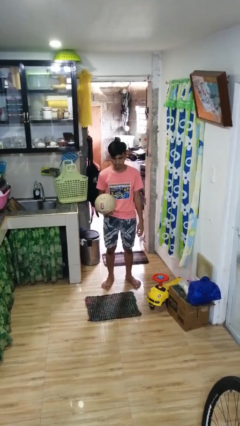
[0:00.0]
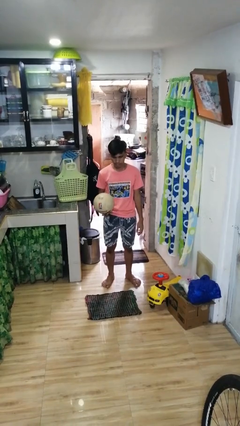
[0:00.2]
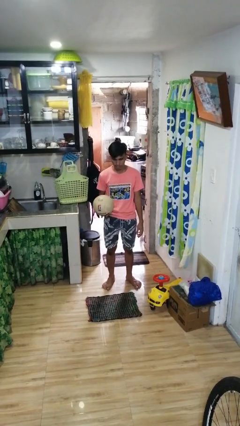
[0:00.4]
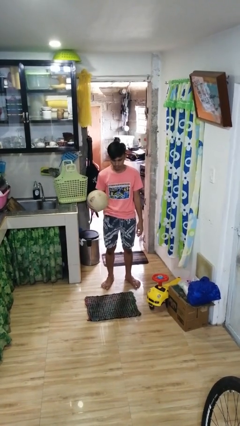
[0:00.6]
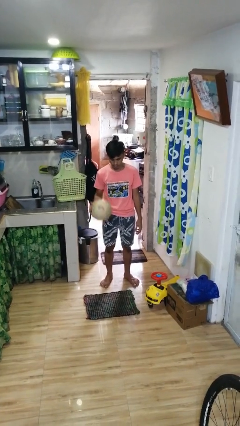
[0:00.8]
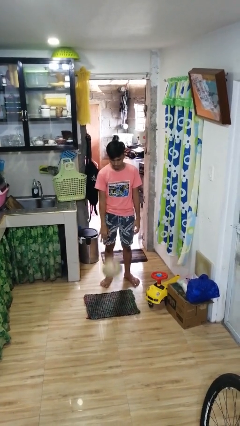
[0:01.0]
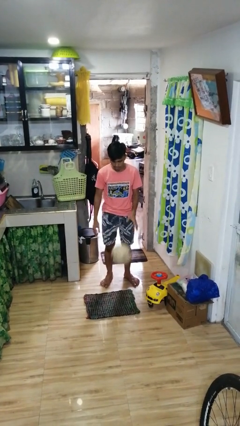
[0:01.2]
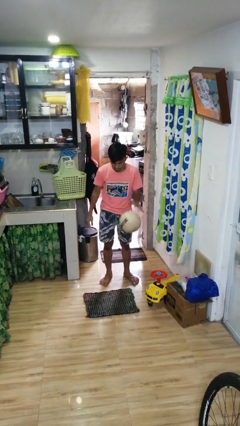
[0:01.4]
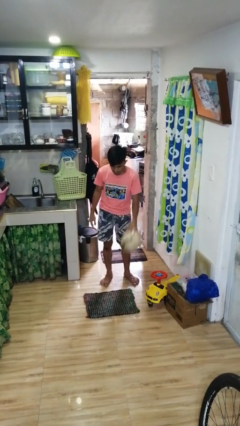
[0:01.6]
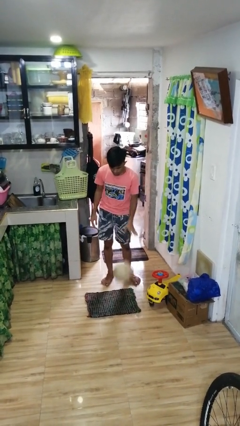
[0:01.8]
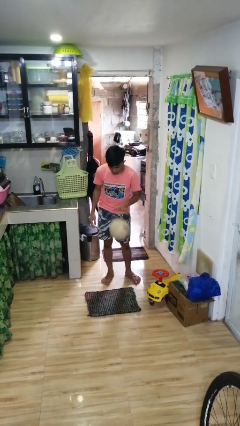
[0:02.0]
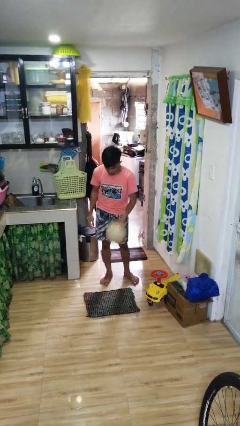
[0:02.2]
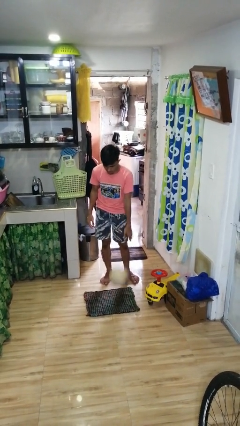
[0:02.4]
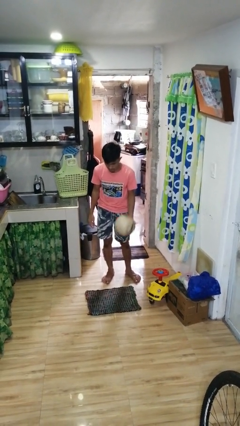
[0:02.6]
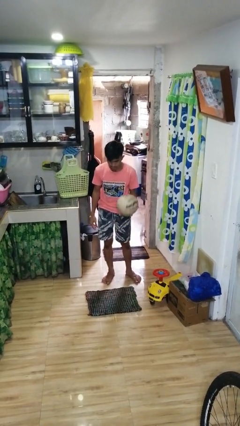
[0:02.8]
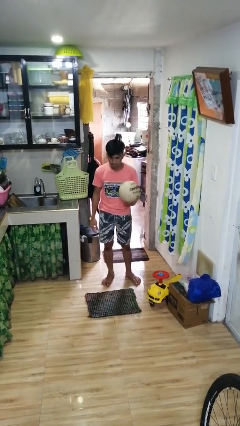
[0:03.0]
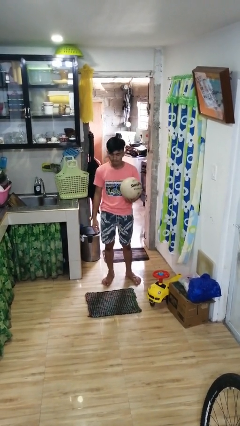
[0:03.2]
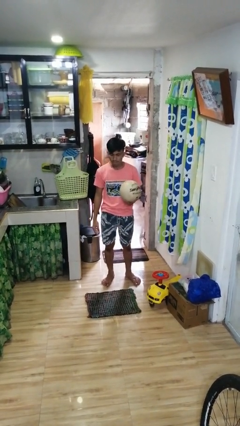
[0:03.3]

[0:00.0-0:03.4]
person bounces ball on floor

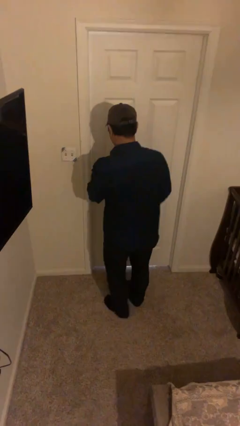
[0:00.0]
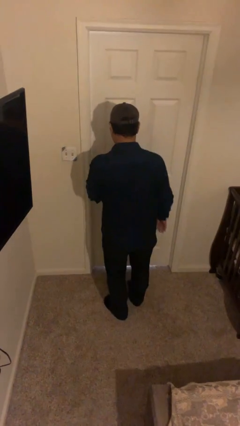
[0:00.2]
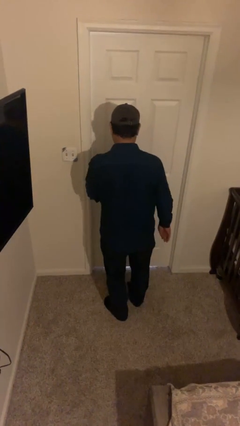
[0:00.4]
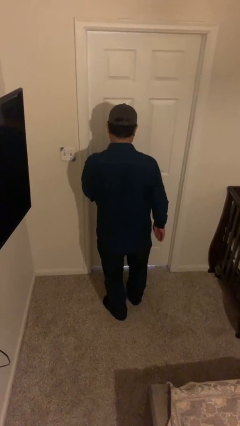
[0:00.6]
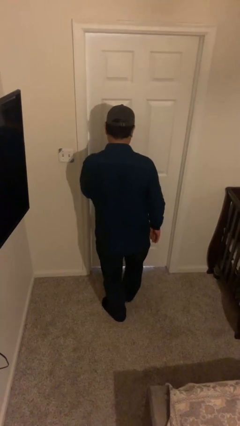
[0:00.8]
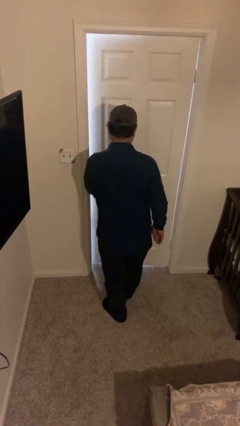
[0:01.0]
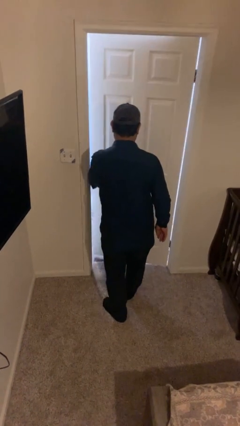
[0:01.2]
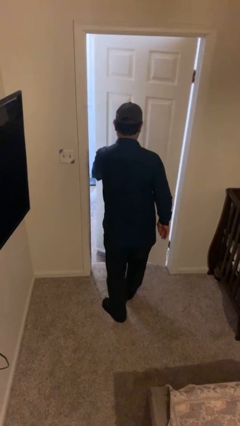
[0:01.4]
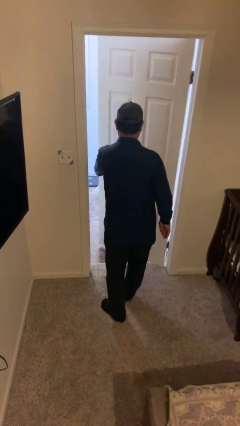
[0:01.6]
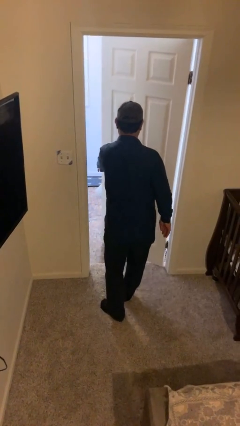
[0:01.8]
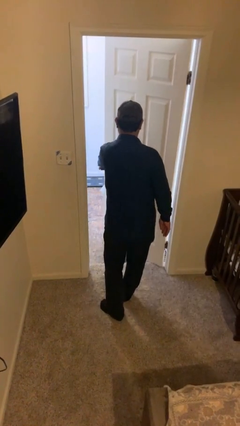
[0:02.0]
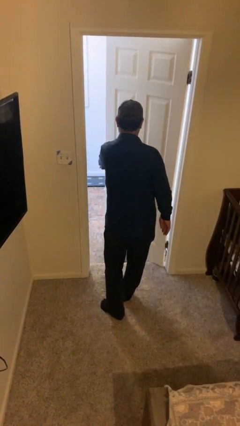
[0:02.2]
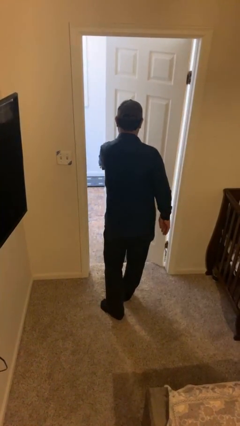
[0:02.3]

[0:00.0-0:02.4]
person opens facility door

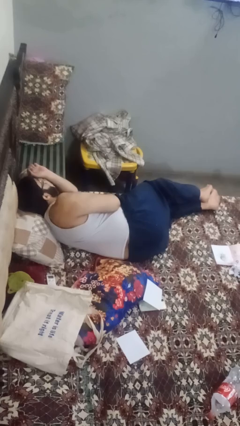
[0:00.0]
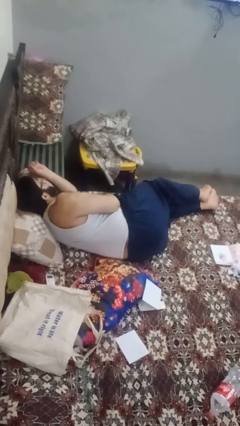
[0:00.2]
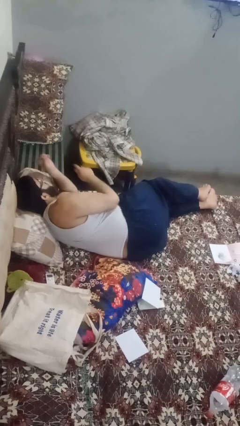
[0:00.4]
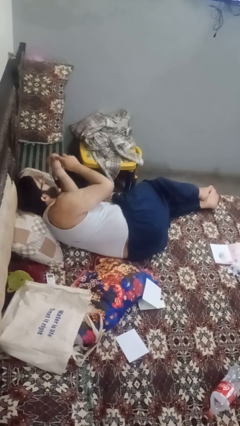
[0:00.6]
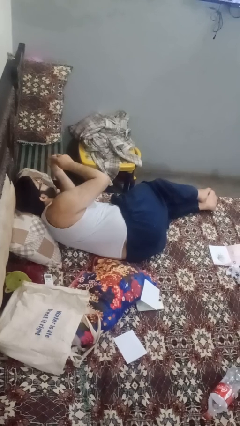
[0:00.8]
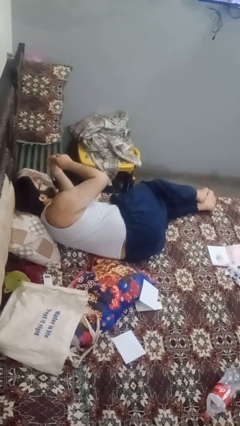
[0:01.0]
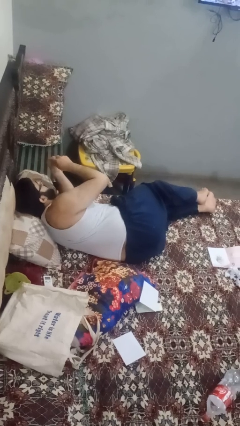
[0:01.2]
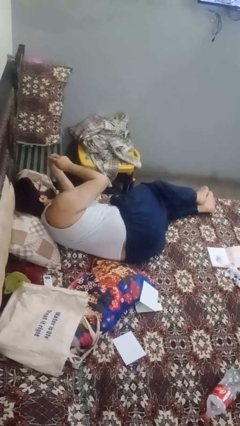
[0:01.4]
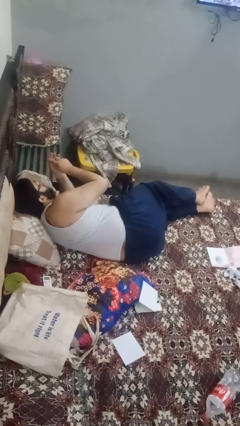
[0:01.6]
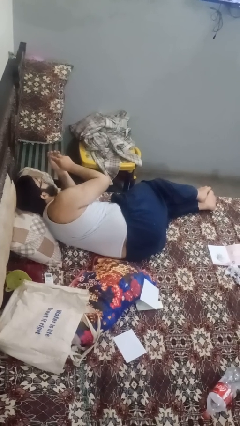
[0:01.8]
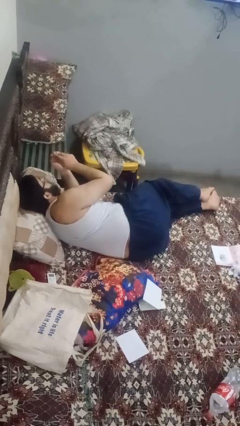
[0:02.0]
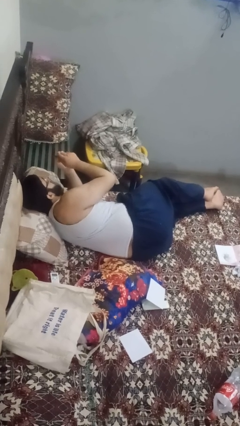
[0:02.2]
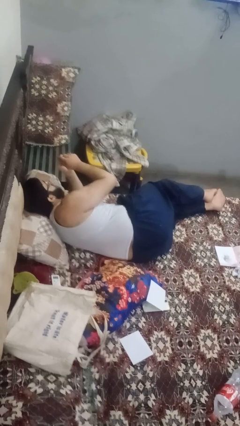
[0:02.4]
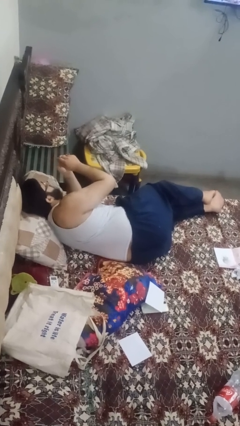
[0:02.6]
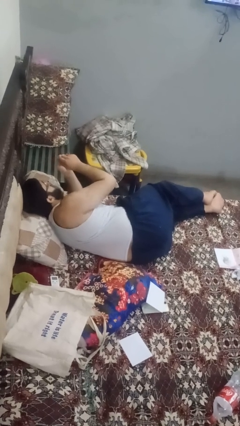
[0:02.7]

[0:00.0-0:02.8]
person files fingernails

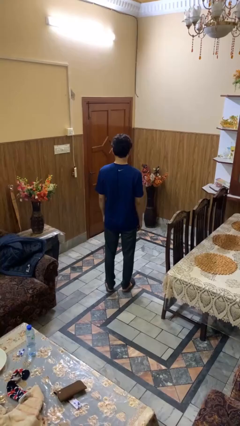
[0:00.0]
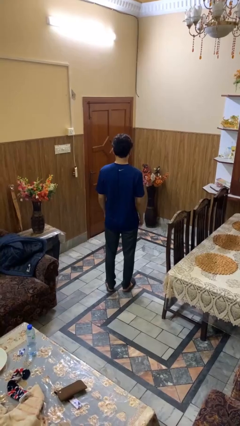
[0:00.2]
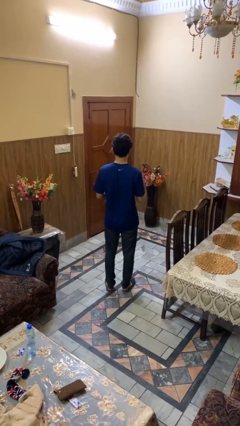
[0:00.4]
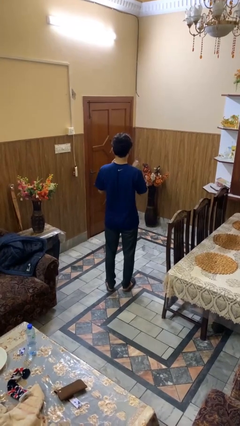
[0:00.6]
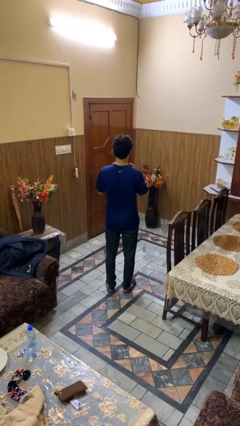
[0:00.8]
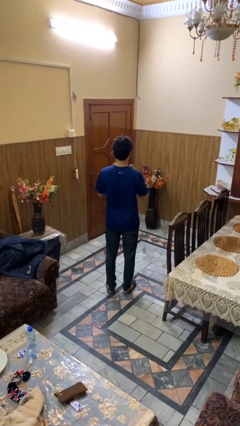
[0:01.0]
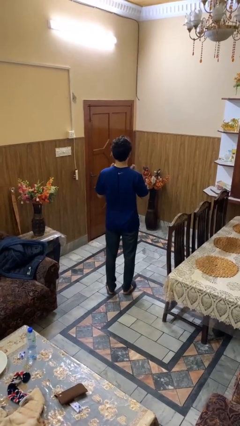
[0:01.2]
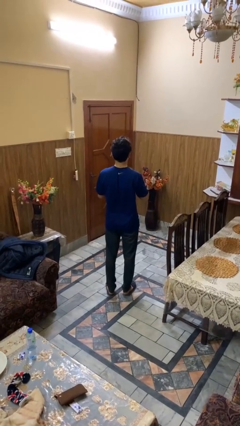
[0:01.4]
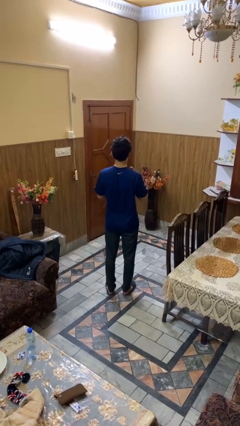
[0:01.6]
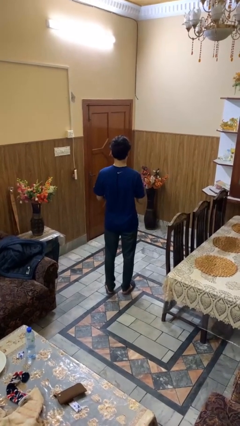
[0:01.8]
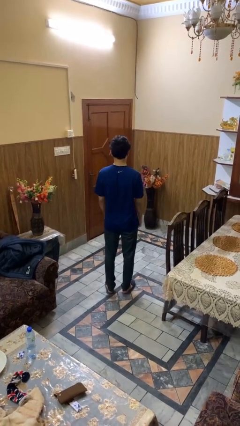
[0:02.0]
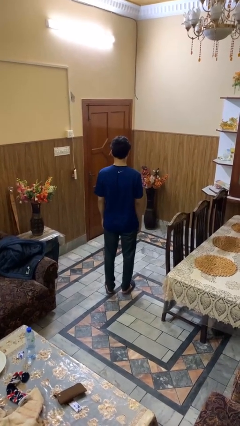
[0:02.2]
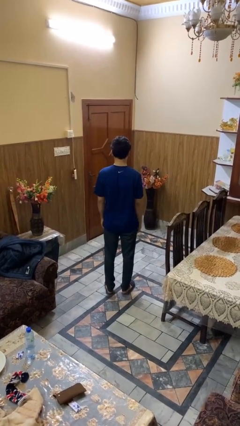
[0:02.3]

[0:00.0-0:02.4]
person drums on chest

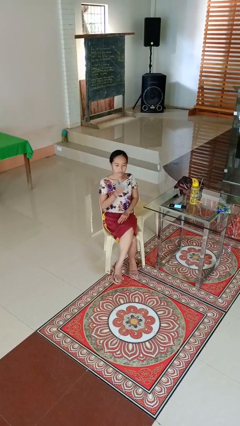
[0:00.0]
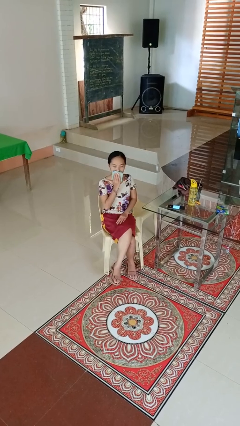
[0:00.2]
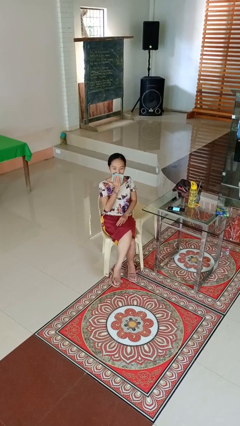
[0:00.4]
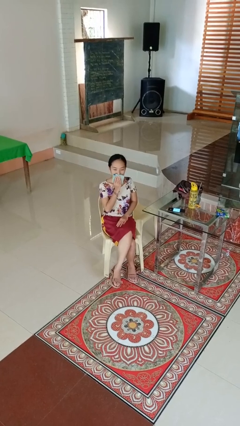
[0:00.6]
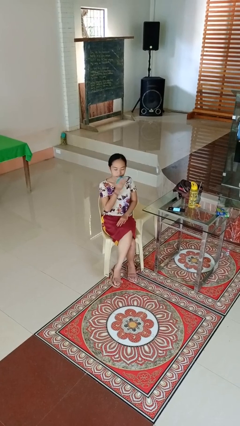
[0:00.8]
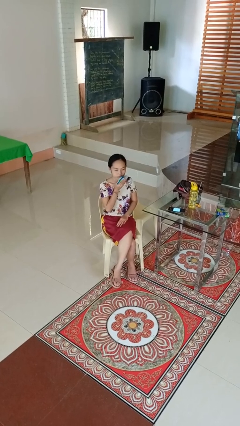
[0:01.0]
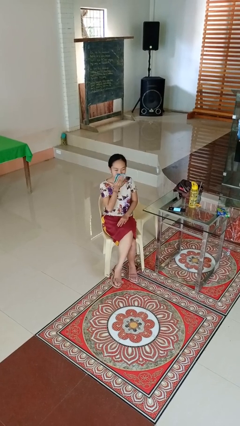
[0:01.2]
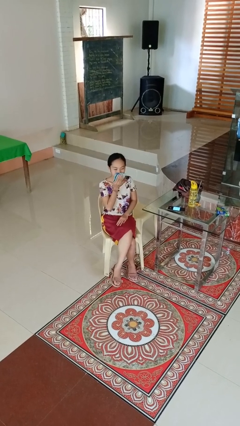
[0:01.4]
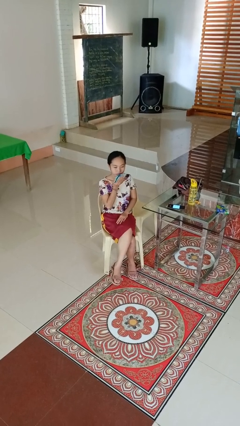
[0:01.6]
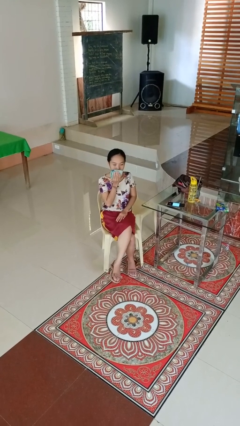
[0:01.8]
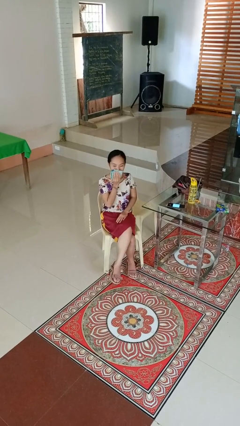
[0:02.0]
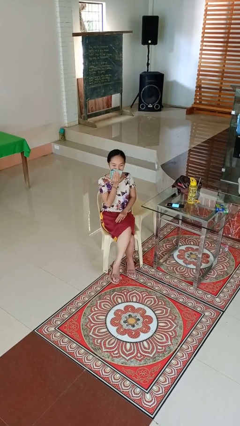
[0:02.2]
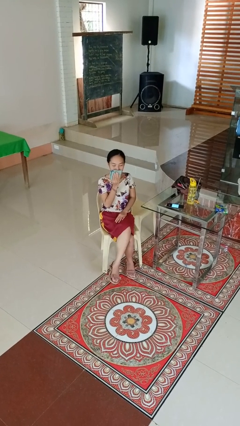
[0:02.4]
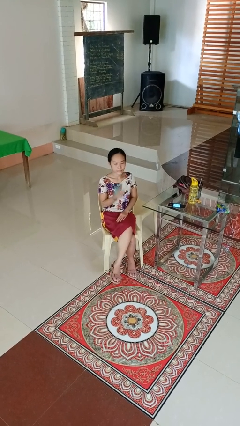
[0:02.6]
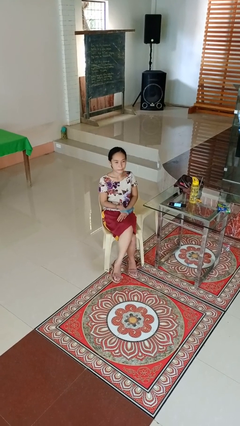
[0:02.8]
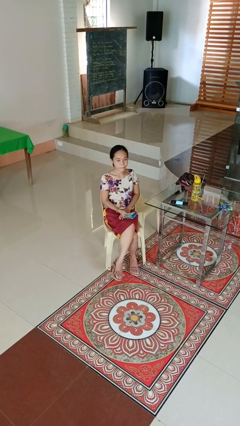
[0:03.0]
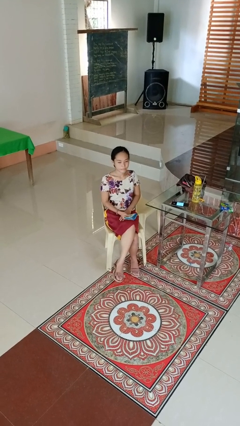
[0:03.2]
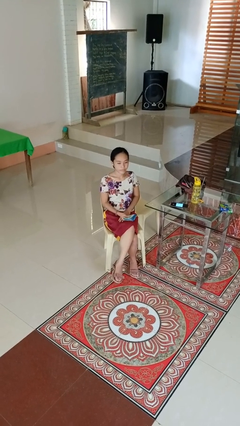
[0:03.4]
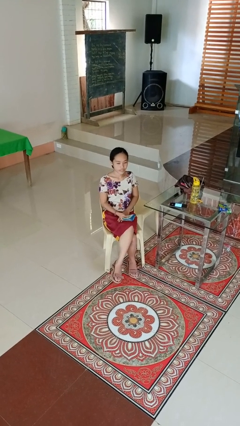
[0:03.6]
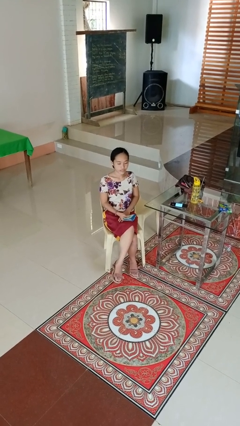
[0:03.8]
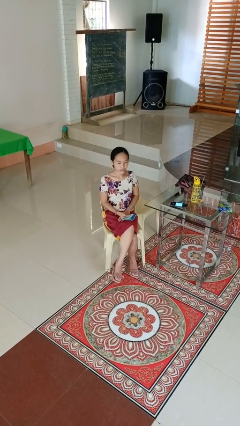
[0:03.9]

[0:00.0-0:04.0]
person wipes mouth with napkin

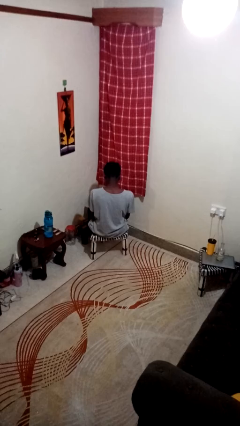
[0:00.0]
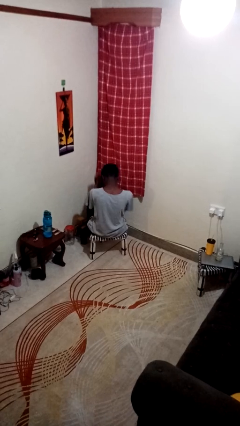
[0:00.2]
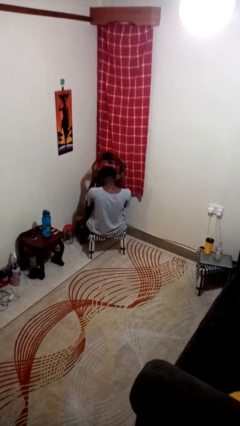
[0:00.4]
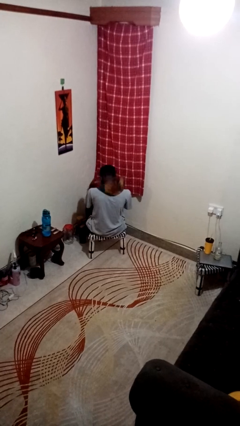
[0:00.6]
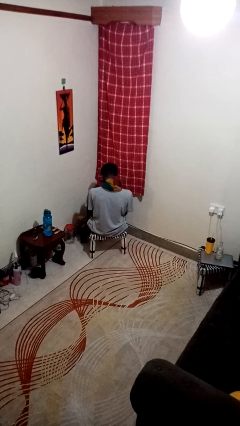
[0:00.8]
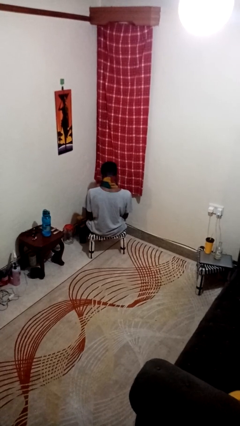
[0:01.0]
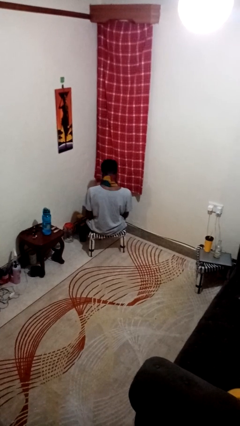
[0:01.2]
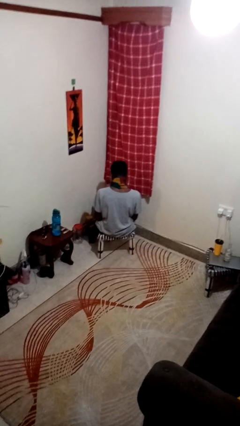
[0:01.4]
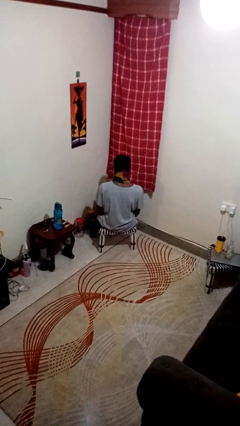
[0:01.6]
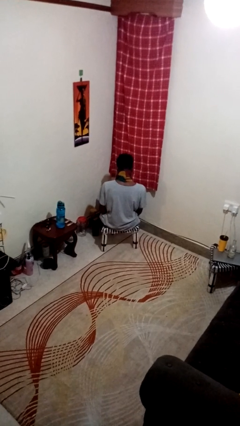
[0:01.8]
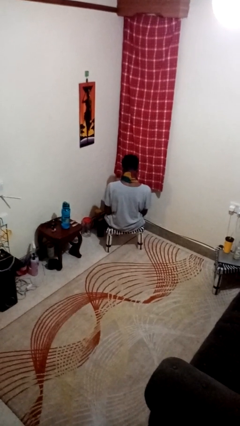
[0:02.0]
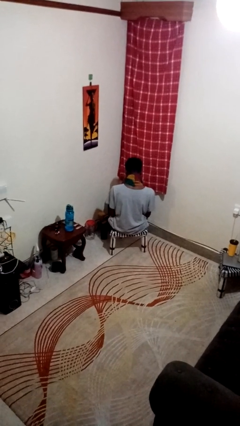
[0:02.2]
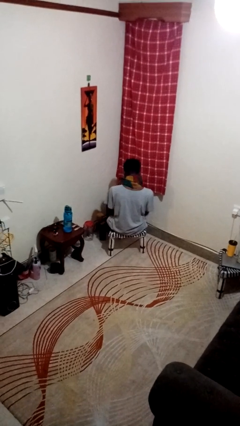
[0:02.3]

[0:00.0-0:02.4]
person puts on scarf
